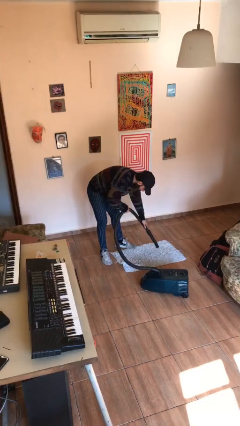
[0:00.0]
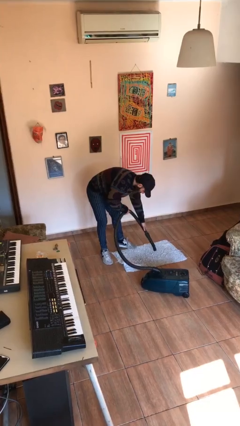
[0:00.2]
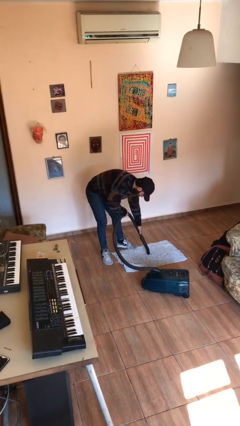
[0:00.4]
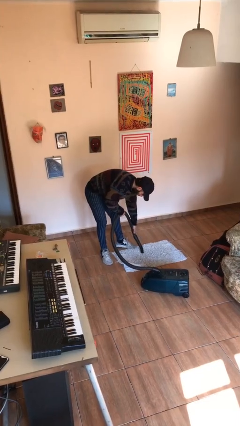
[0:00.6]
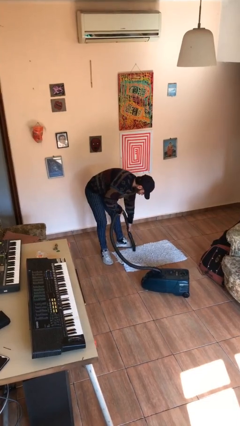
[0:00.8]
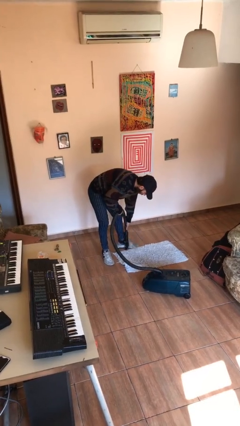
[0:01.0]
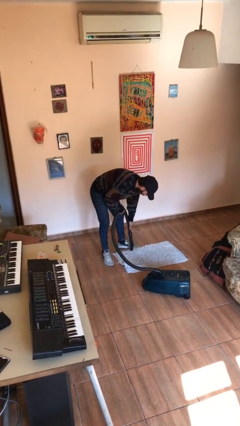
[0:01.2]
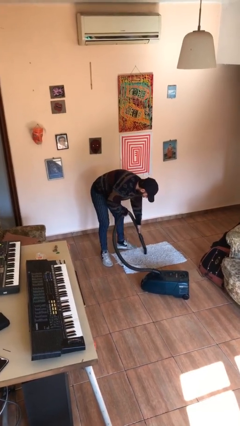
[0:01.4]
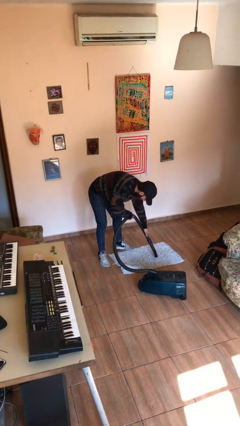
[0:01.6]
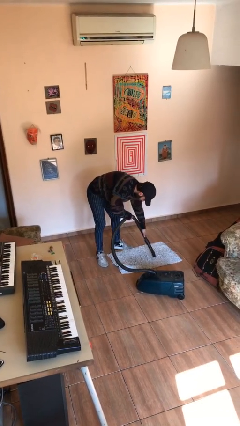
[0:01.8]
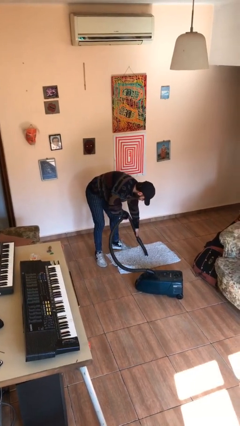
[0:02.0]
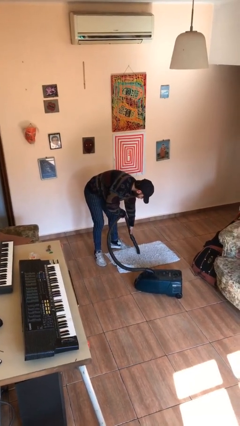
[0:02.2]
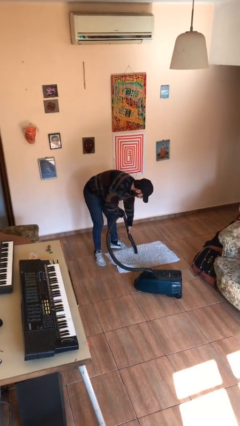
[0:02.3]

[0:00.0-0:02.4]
person vacuums carpet

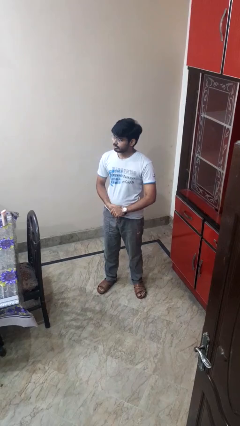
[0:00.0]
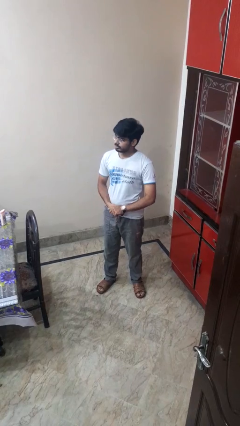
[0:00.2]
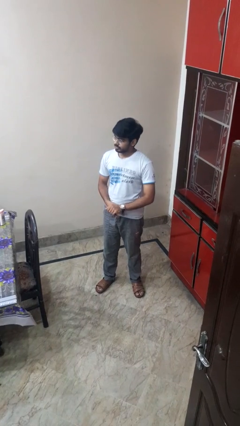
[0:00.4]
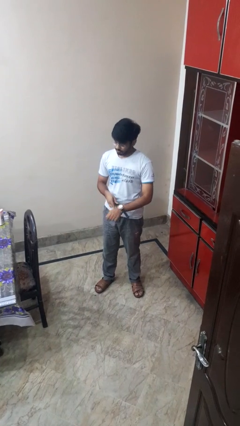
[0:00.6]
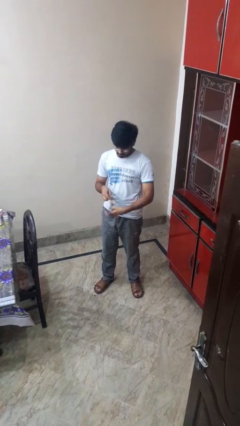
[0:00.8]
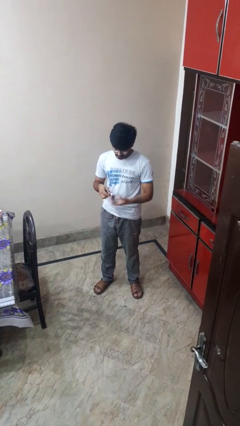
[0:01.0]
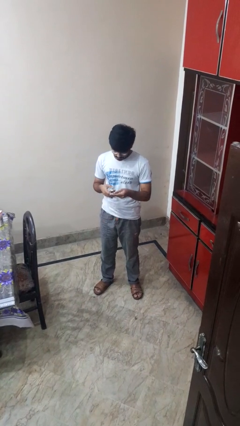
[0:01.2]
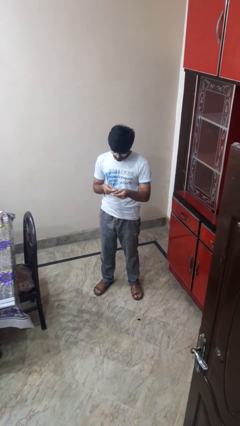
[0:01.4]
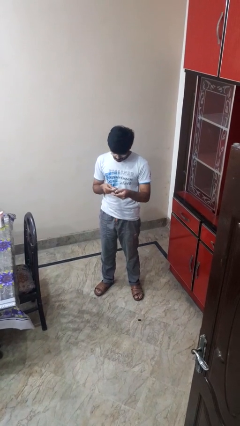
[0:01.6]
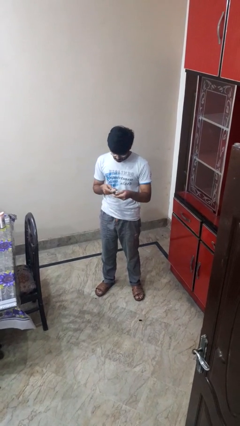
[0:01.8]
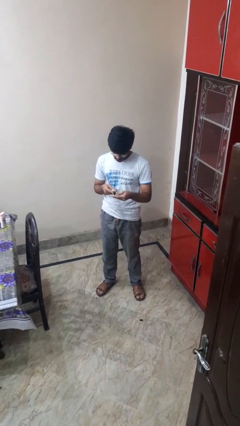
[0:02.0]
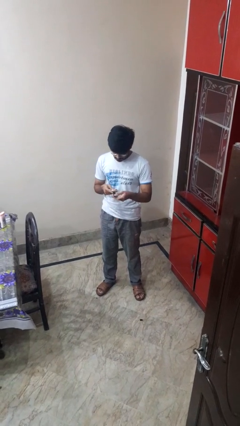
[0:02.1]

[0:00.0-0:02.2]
person takes off wristwatch

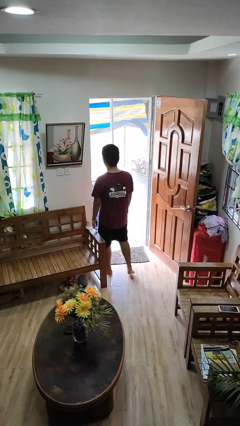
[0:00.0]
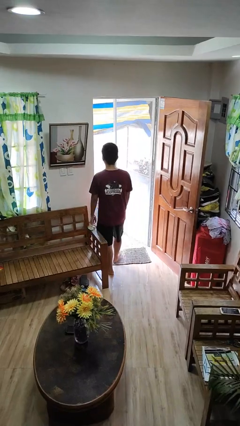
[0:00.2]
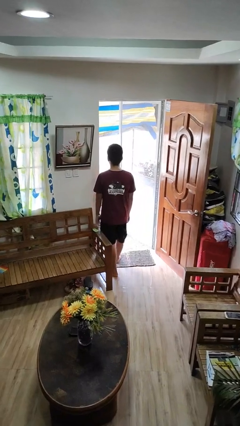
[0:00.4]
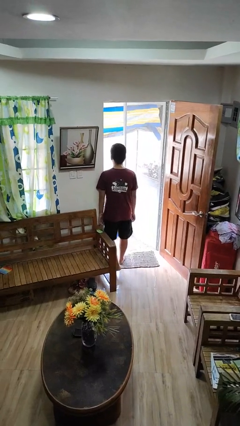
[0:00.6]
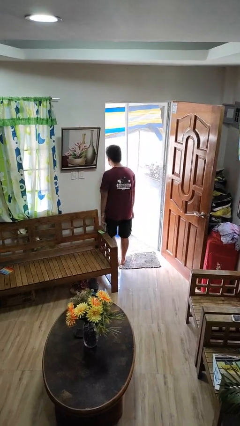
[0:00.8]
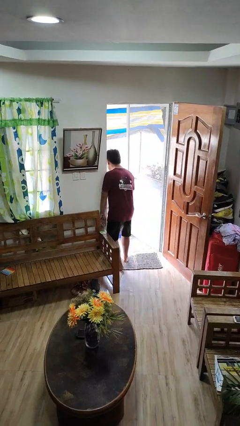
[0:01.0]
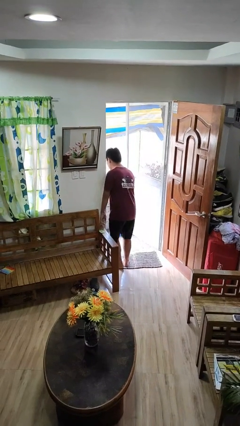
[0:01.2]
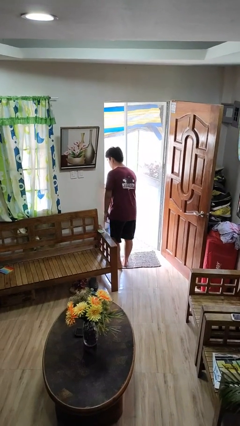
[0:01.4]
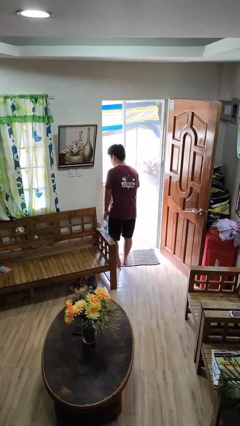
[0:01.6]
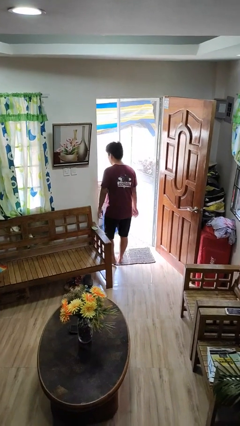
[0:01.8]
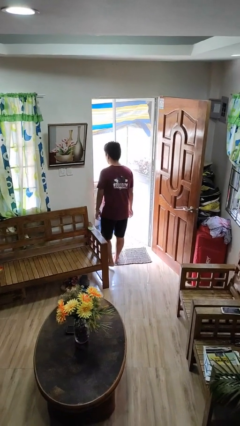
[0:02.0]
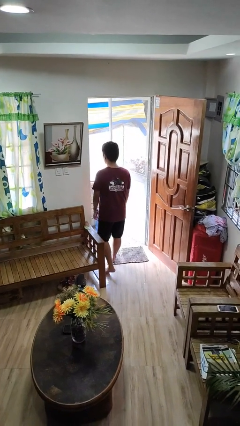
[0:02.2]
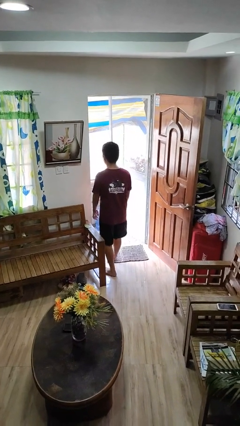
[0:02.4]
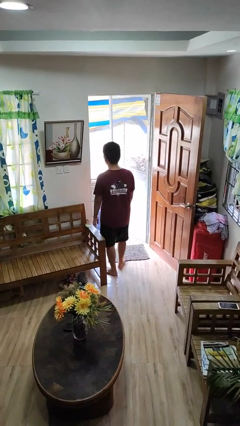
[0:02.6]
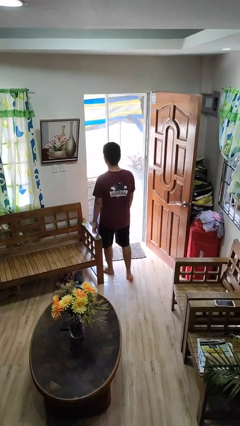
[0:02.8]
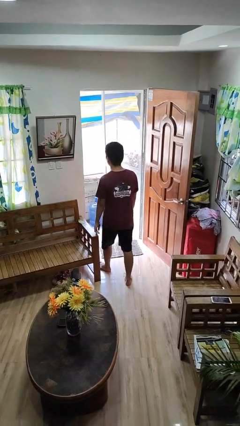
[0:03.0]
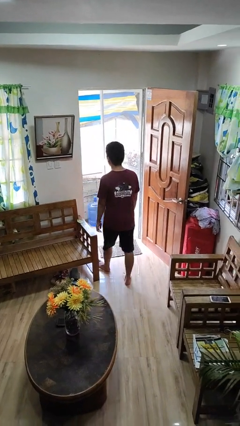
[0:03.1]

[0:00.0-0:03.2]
person bumps into wall

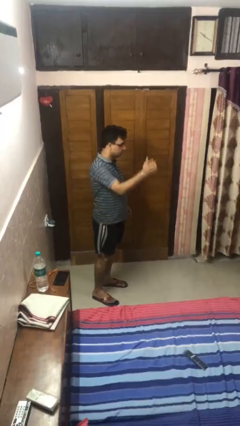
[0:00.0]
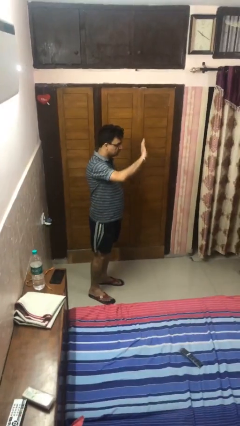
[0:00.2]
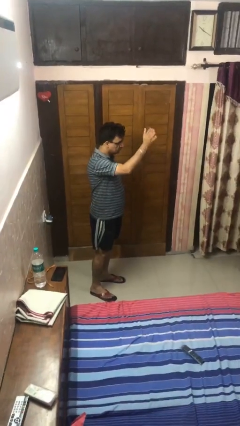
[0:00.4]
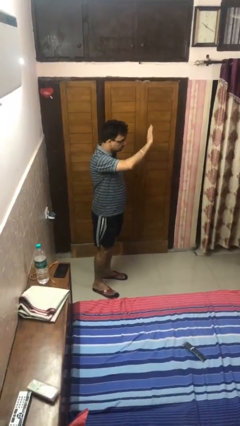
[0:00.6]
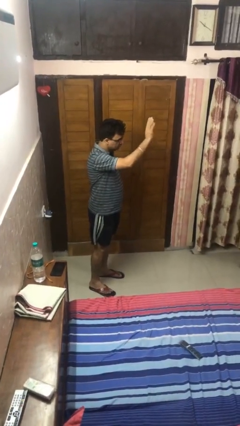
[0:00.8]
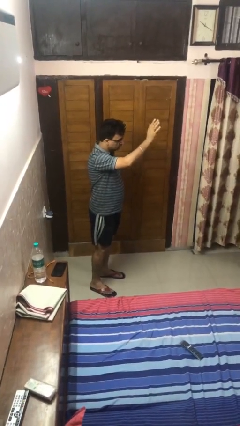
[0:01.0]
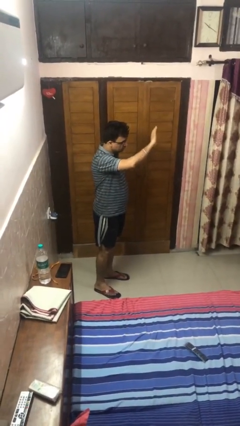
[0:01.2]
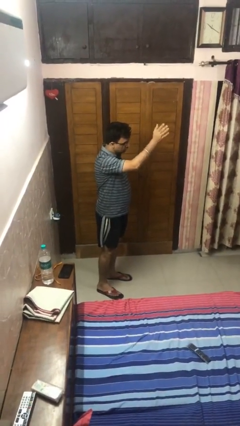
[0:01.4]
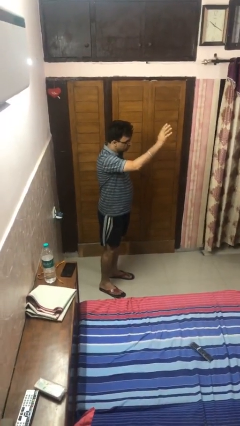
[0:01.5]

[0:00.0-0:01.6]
person waves at person

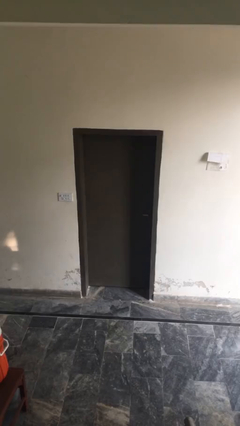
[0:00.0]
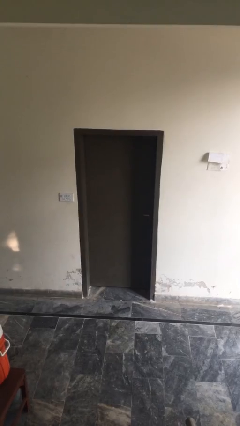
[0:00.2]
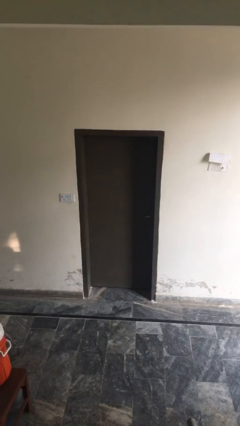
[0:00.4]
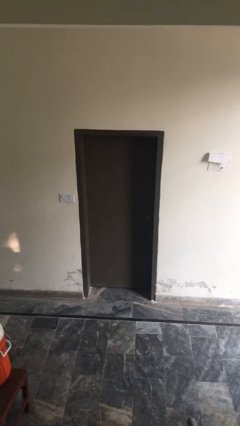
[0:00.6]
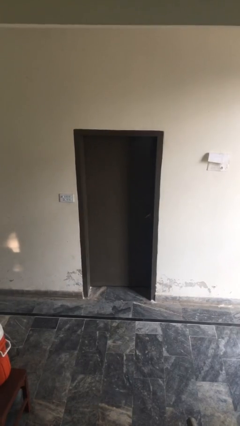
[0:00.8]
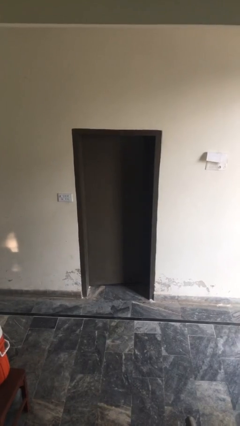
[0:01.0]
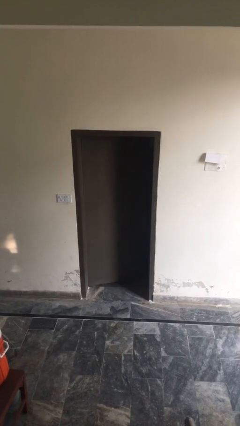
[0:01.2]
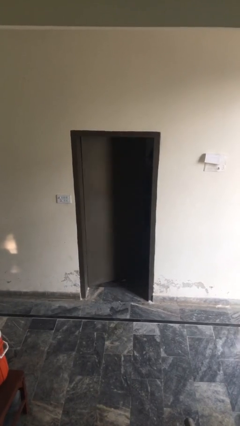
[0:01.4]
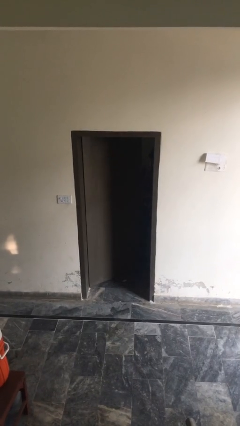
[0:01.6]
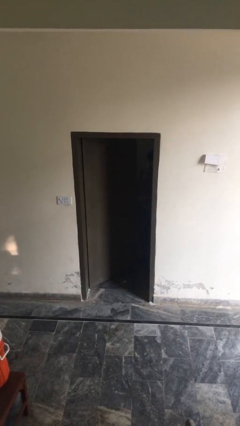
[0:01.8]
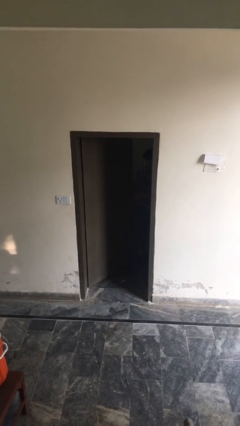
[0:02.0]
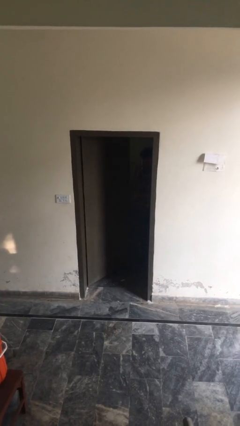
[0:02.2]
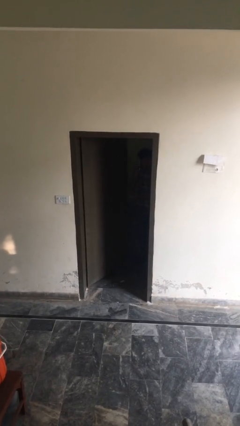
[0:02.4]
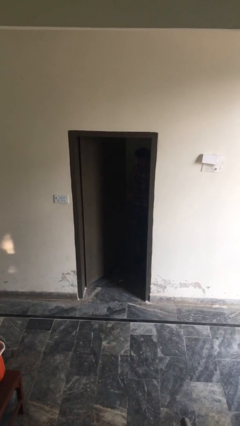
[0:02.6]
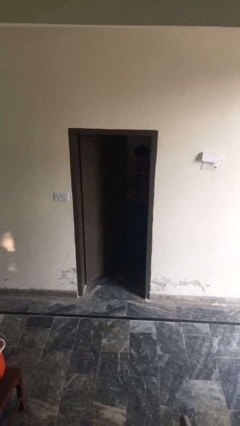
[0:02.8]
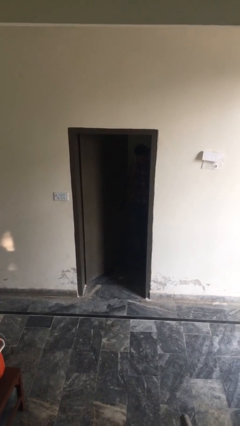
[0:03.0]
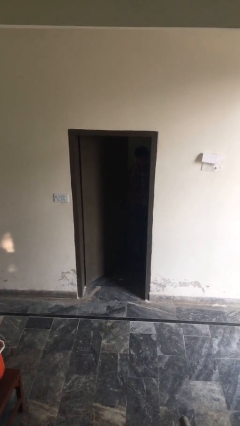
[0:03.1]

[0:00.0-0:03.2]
person opens facility door

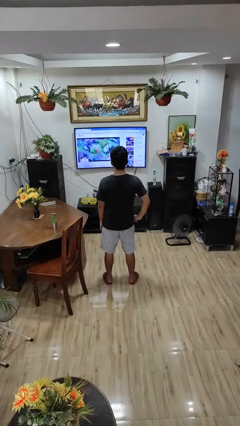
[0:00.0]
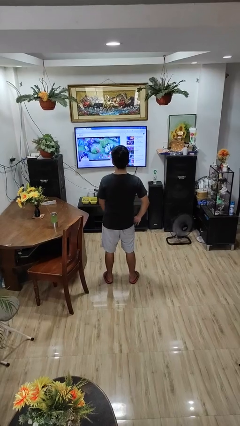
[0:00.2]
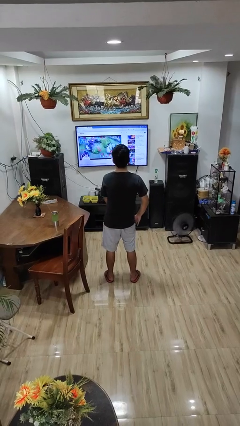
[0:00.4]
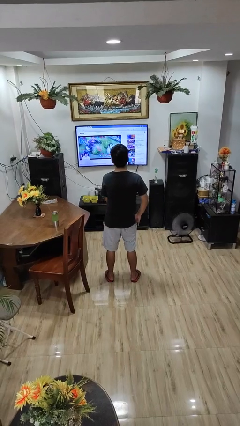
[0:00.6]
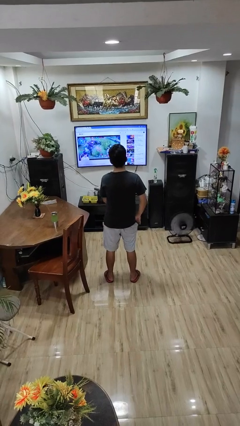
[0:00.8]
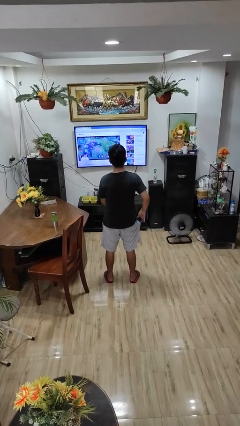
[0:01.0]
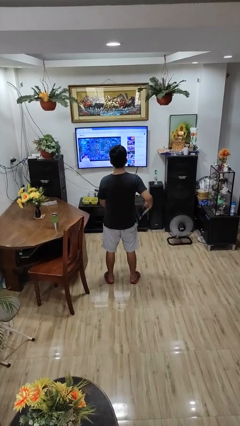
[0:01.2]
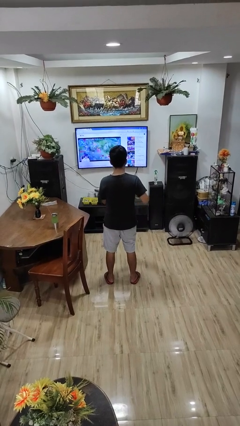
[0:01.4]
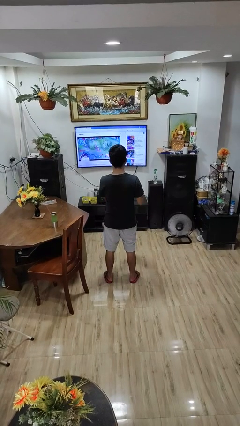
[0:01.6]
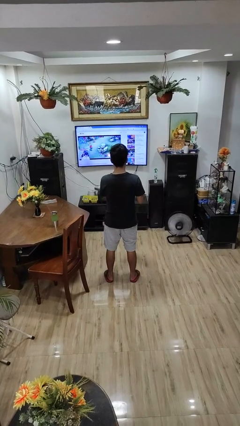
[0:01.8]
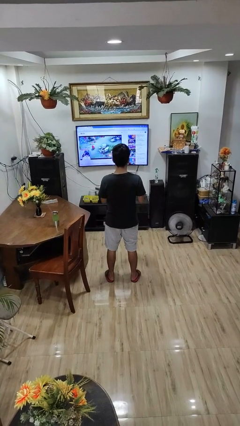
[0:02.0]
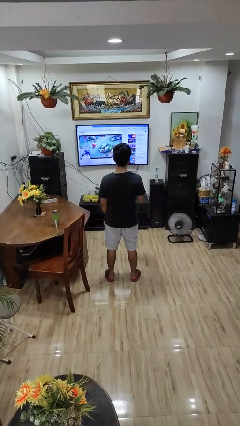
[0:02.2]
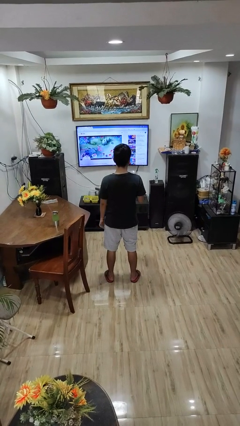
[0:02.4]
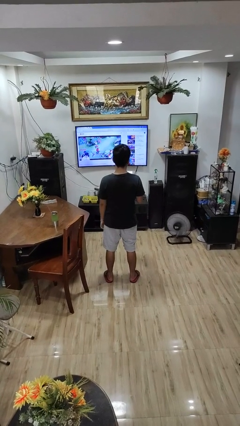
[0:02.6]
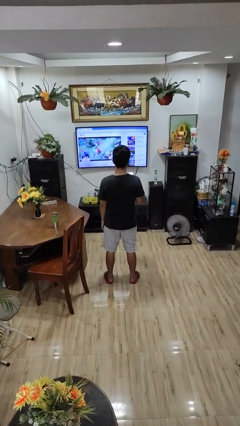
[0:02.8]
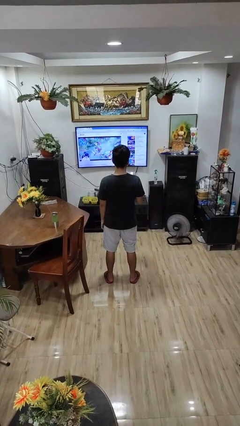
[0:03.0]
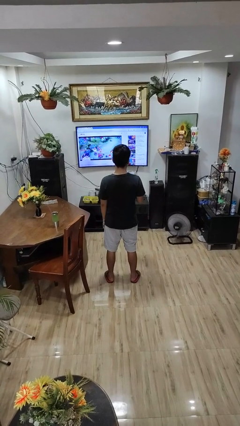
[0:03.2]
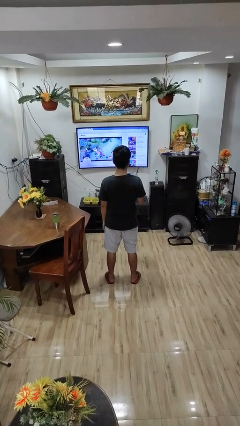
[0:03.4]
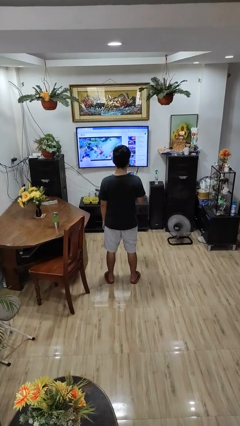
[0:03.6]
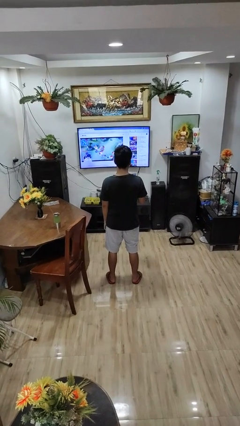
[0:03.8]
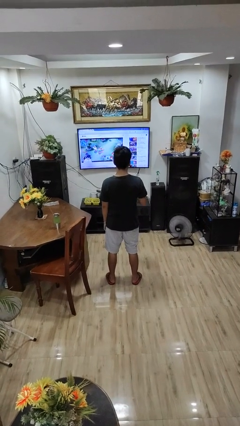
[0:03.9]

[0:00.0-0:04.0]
person takes phone from pocket

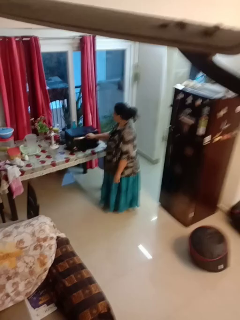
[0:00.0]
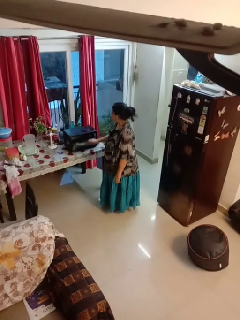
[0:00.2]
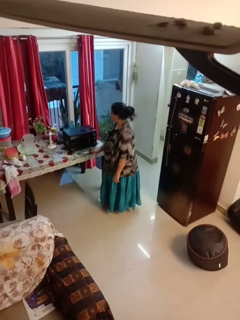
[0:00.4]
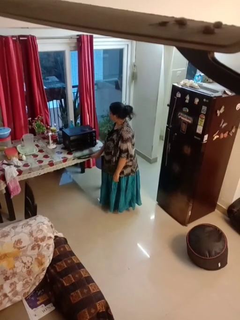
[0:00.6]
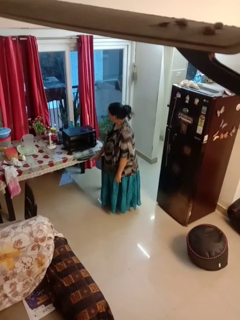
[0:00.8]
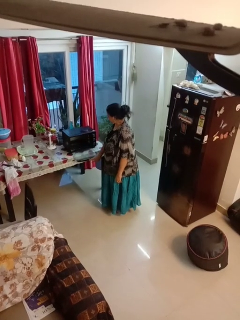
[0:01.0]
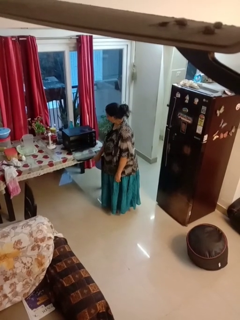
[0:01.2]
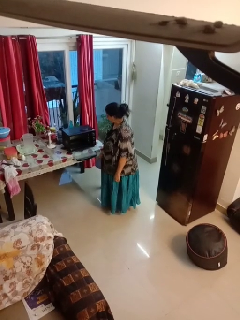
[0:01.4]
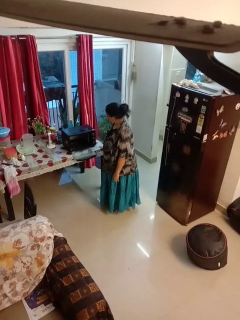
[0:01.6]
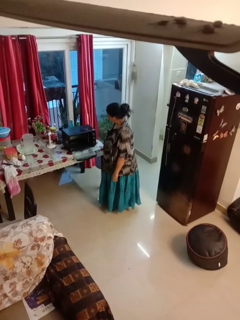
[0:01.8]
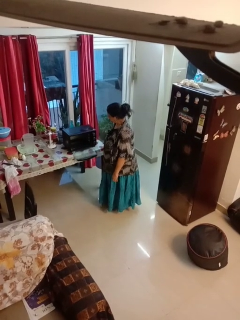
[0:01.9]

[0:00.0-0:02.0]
person opens microwave
